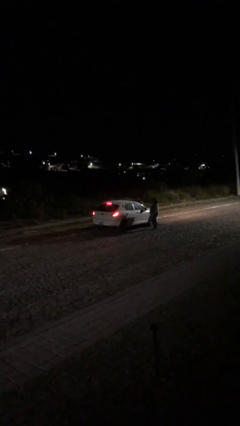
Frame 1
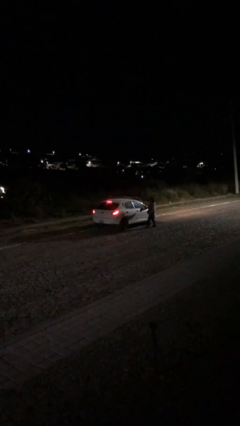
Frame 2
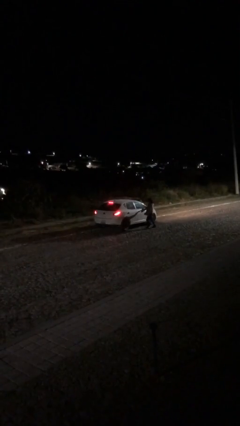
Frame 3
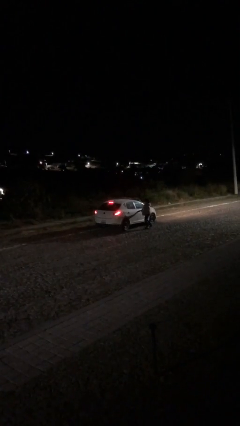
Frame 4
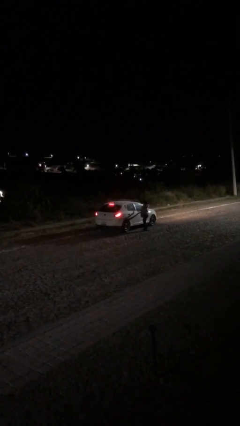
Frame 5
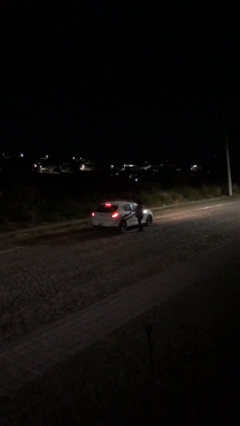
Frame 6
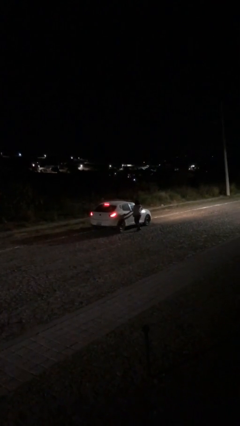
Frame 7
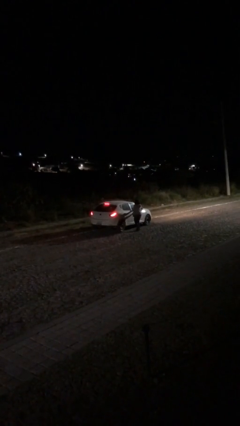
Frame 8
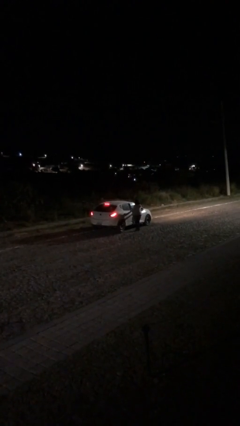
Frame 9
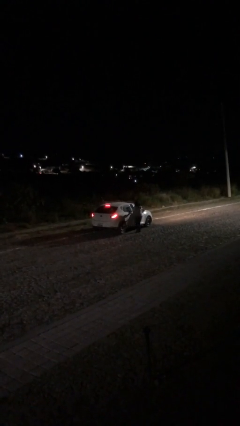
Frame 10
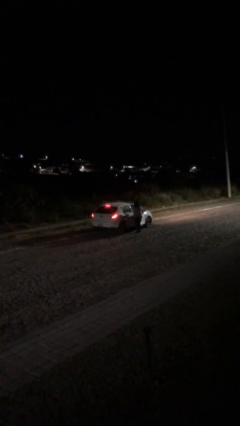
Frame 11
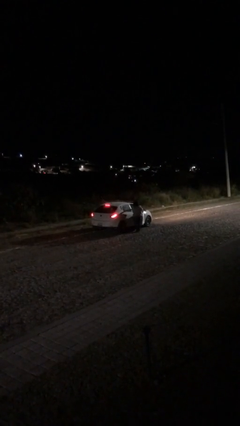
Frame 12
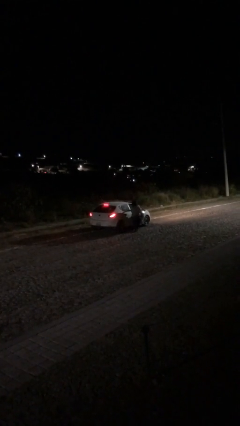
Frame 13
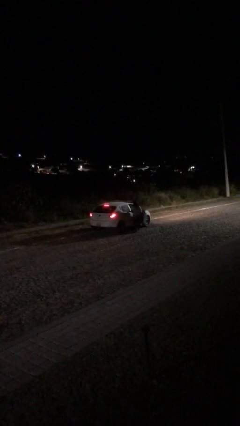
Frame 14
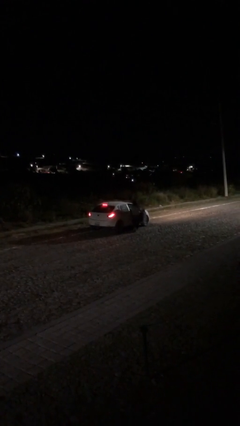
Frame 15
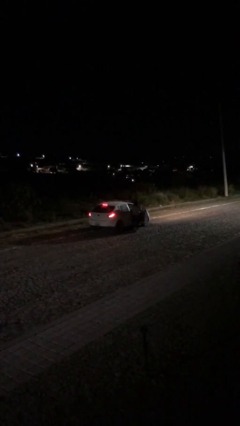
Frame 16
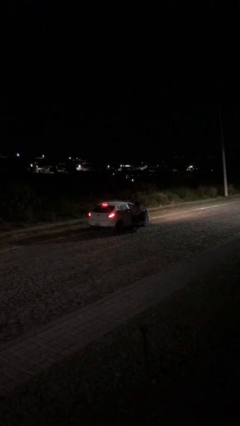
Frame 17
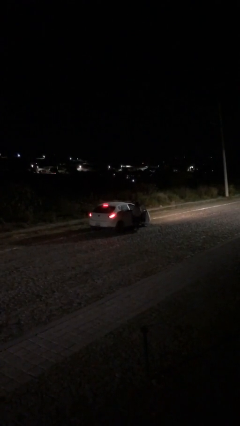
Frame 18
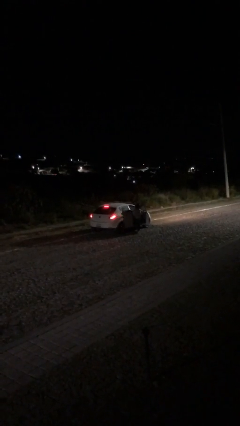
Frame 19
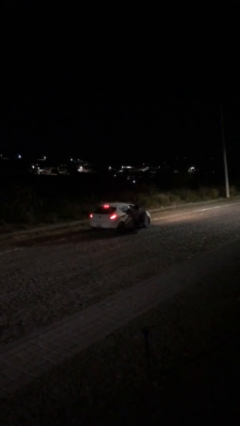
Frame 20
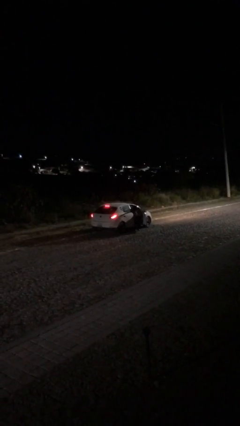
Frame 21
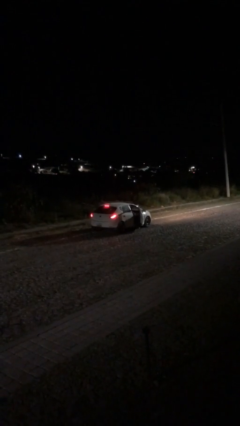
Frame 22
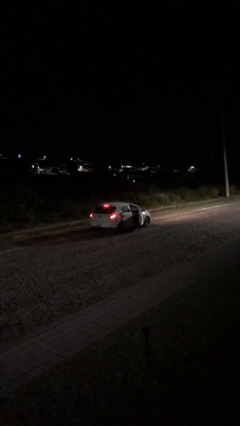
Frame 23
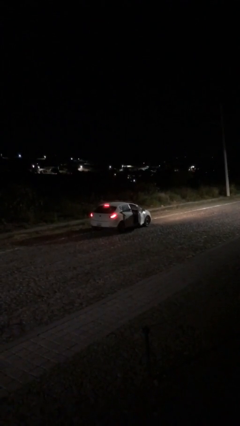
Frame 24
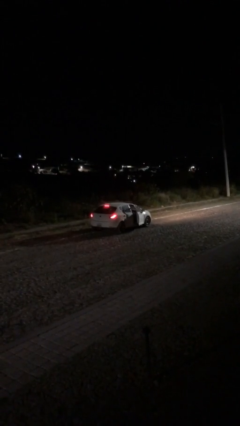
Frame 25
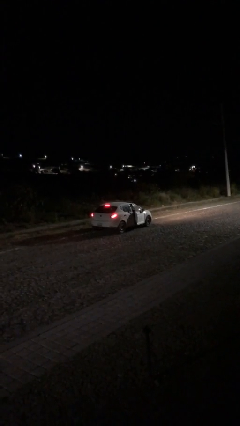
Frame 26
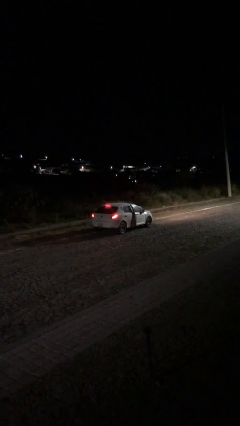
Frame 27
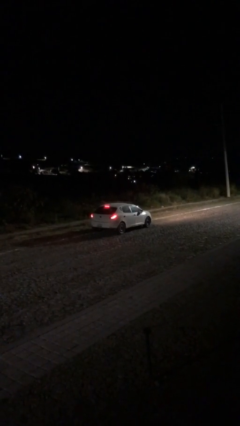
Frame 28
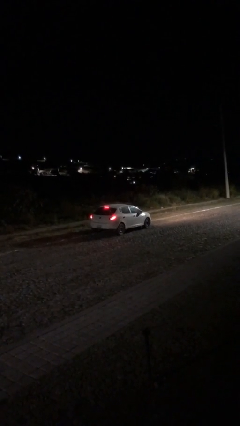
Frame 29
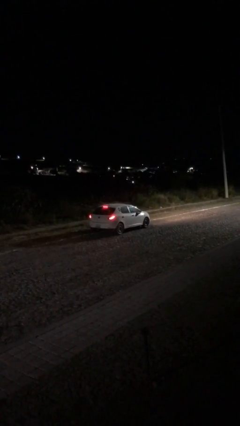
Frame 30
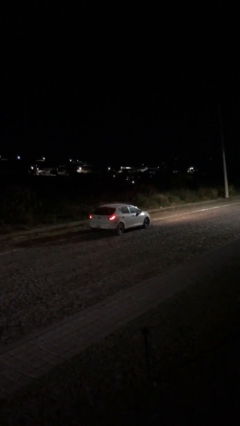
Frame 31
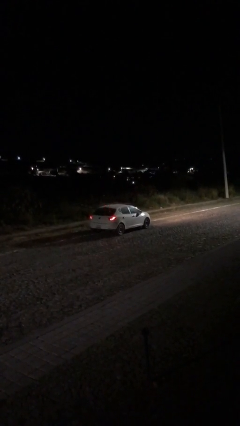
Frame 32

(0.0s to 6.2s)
car picks up person

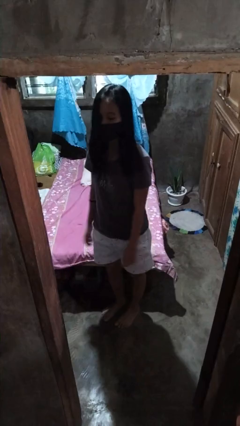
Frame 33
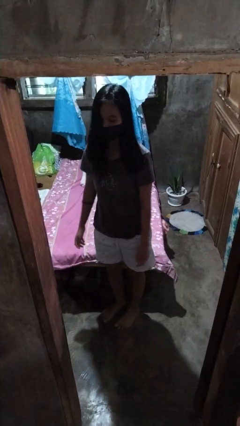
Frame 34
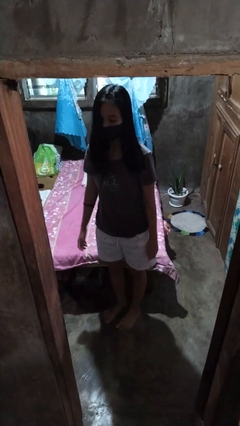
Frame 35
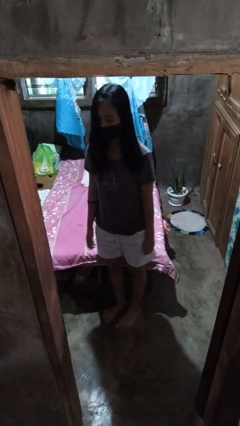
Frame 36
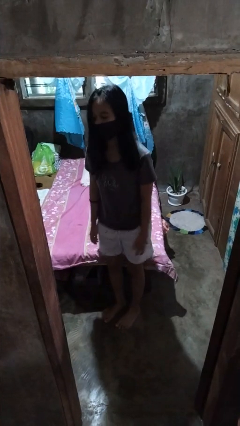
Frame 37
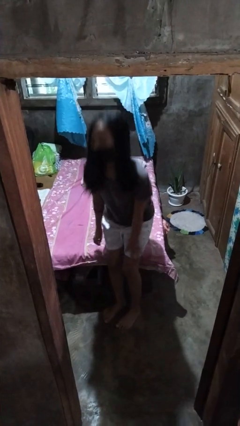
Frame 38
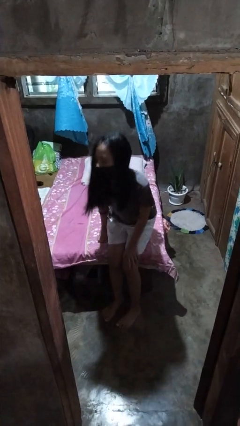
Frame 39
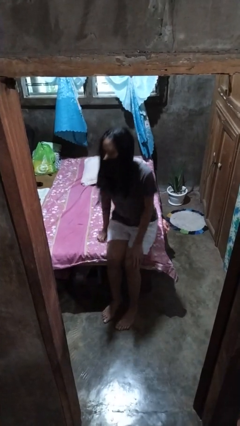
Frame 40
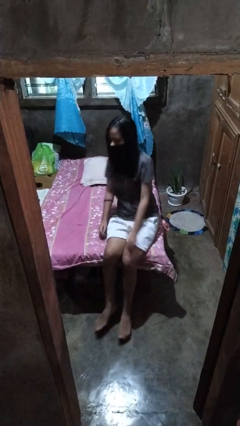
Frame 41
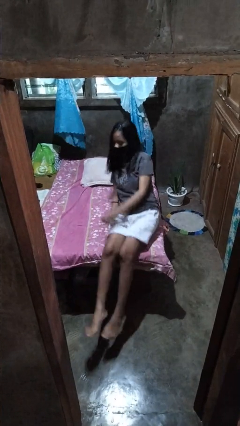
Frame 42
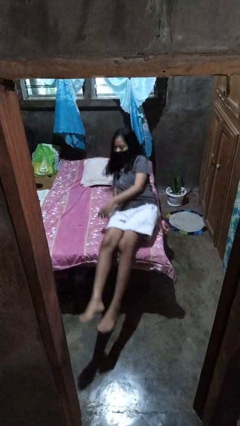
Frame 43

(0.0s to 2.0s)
person lies down on bed

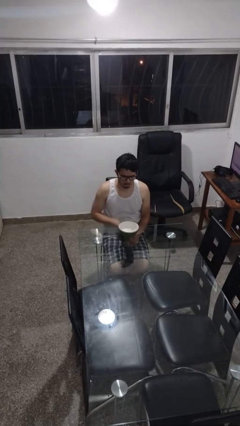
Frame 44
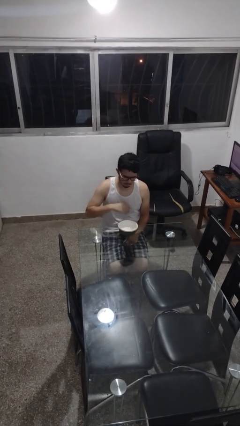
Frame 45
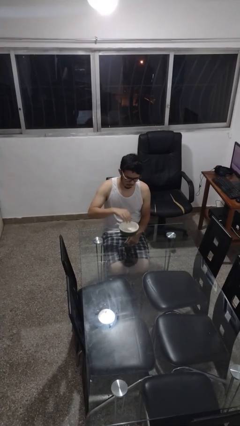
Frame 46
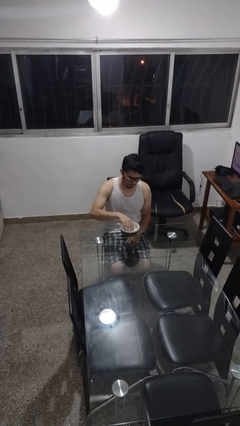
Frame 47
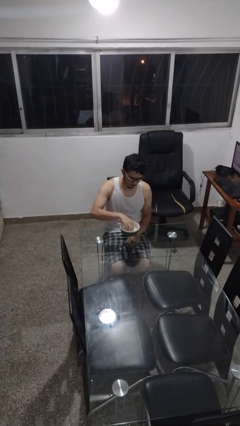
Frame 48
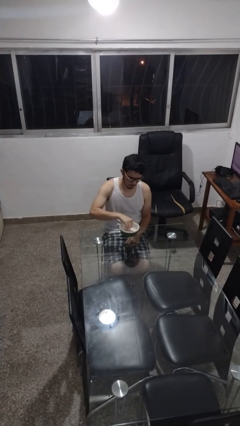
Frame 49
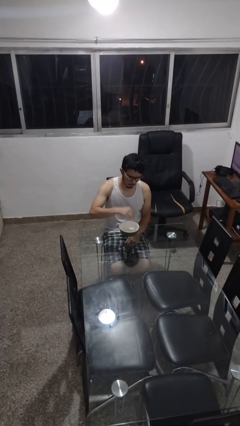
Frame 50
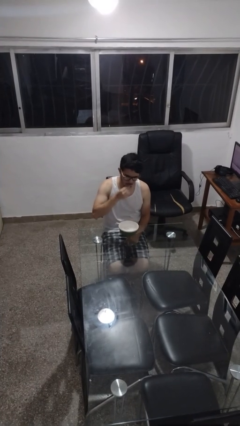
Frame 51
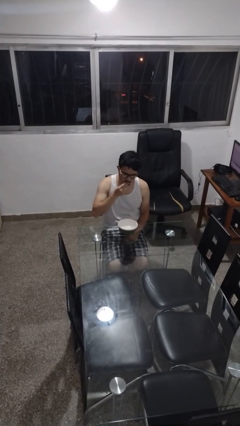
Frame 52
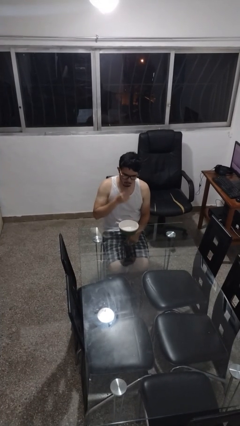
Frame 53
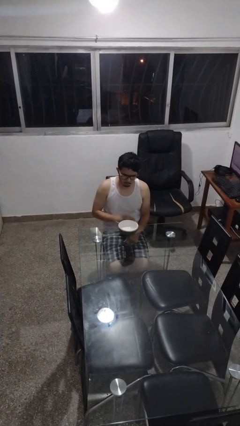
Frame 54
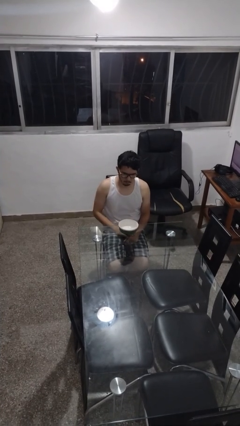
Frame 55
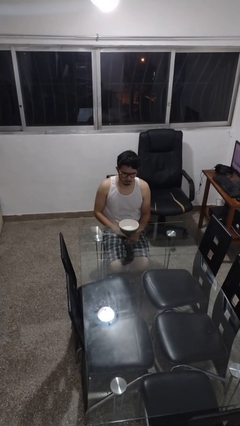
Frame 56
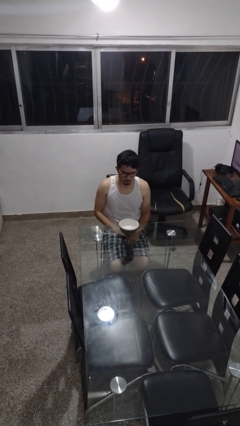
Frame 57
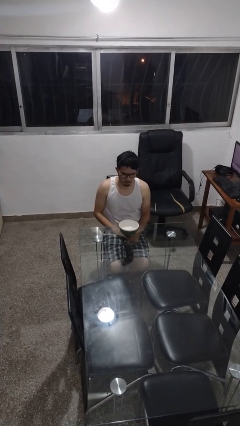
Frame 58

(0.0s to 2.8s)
person eats with hands

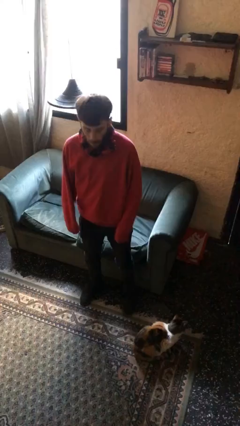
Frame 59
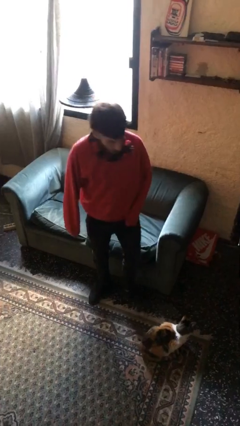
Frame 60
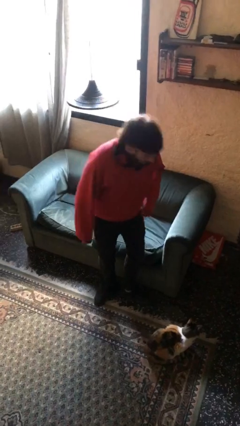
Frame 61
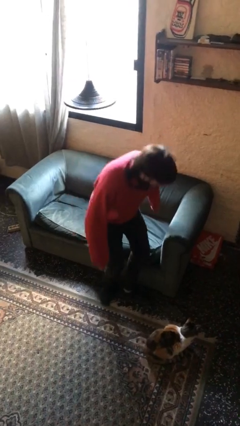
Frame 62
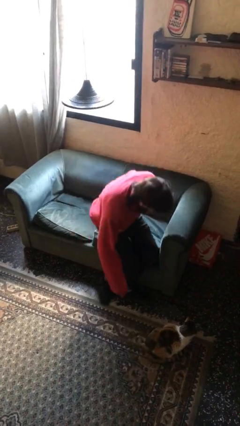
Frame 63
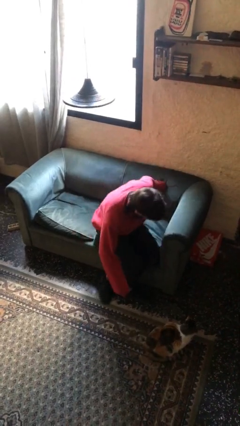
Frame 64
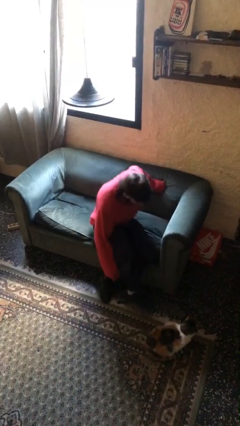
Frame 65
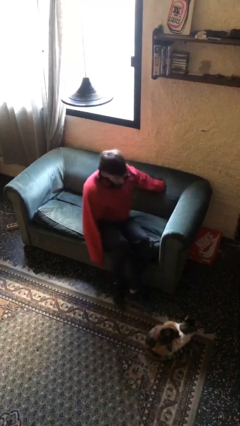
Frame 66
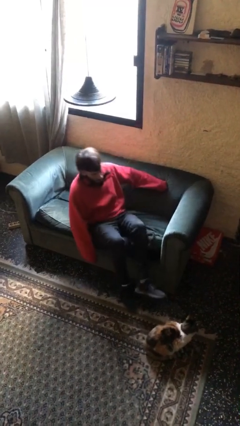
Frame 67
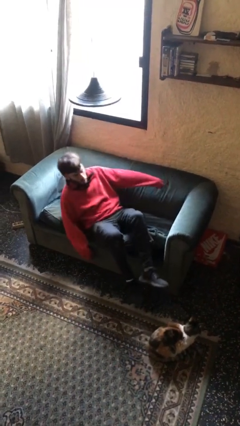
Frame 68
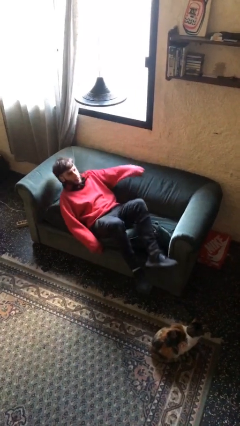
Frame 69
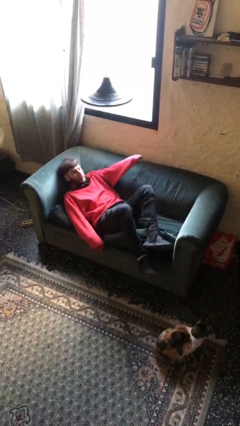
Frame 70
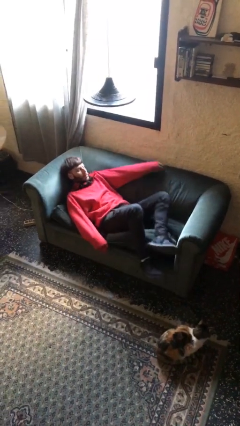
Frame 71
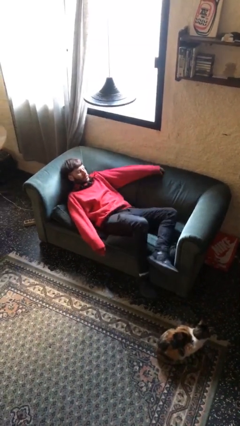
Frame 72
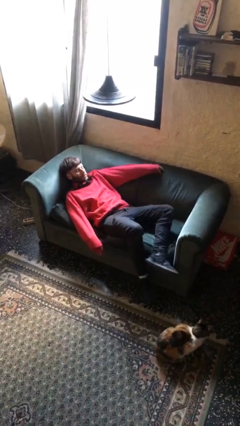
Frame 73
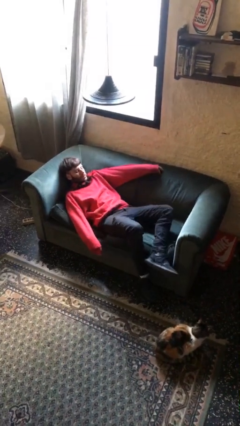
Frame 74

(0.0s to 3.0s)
person lies down on couch

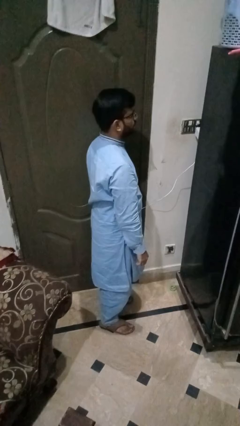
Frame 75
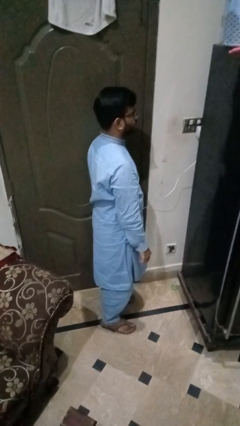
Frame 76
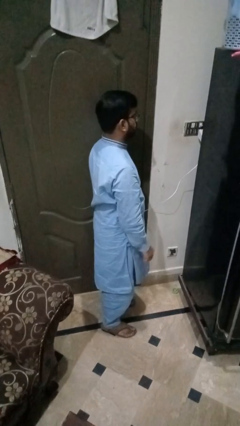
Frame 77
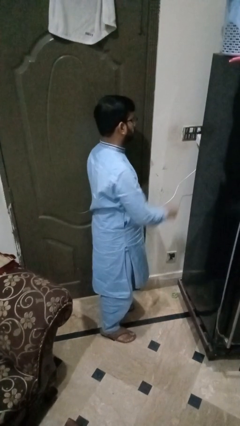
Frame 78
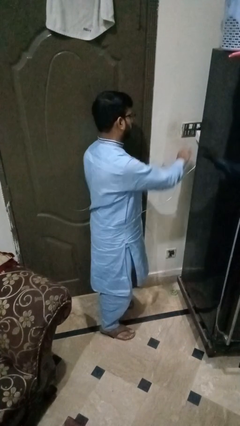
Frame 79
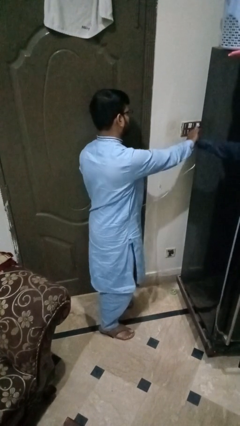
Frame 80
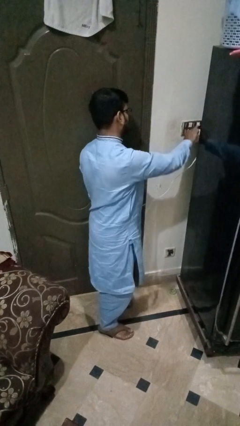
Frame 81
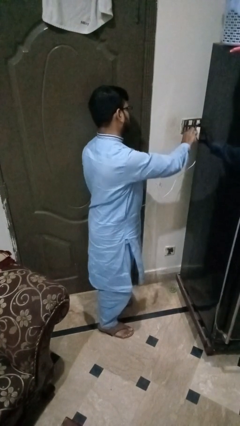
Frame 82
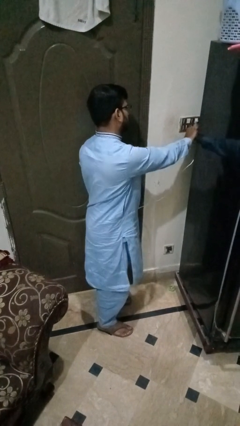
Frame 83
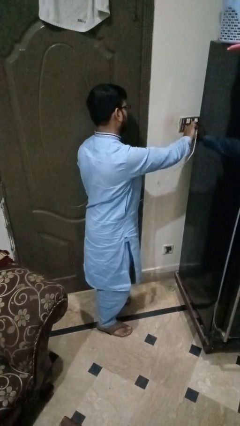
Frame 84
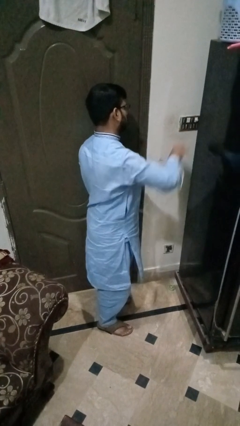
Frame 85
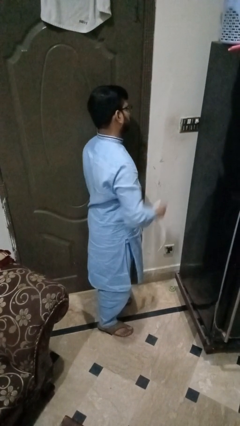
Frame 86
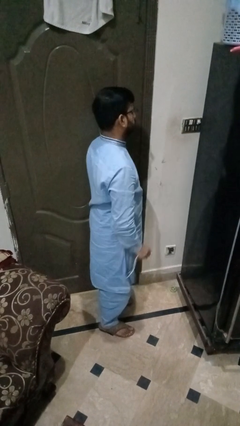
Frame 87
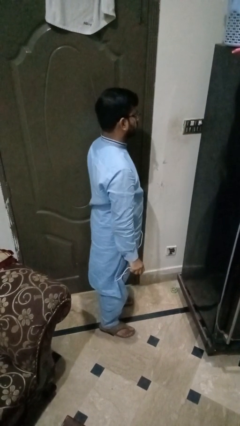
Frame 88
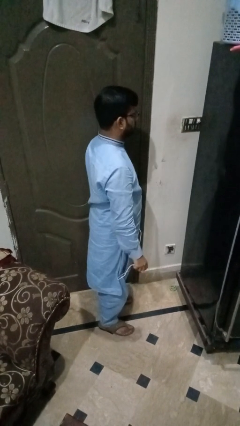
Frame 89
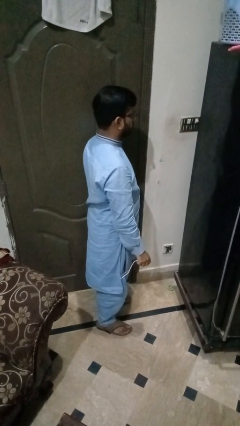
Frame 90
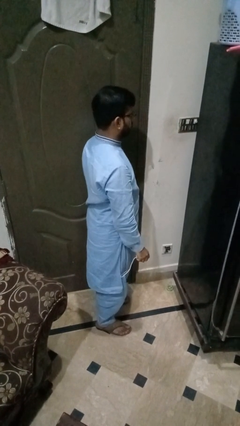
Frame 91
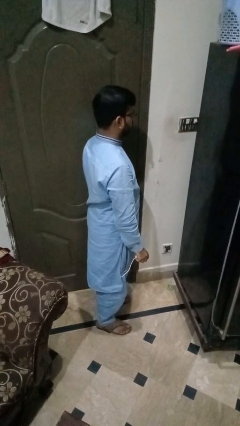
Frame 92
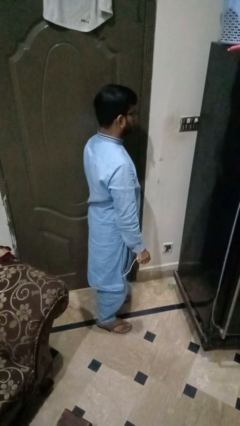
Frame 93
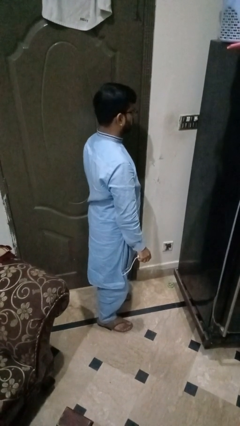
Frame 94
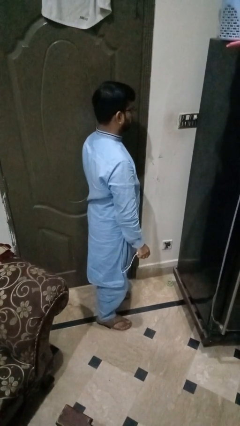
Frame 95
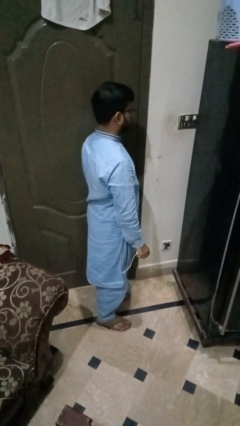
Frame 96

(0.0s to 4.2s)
person unplugs from electrical socket
